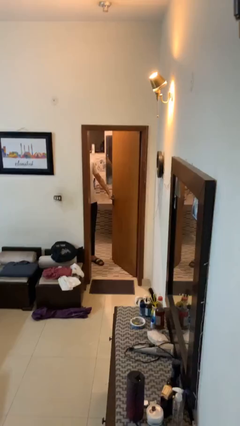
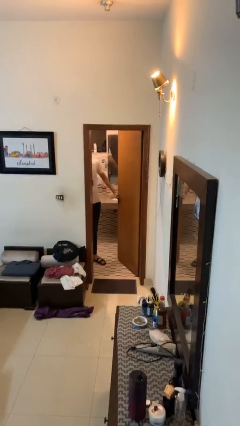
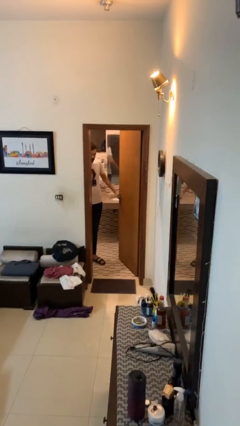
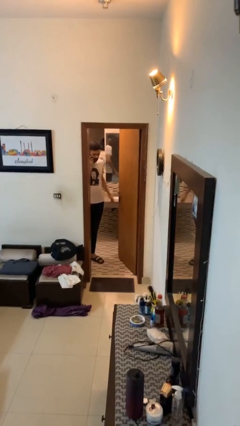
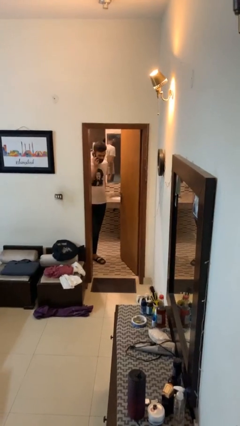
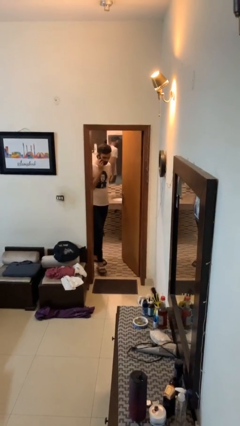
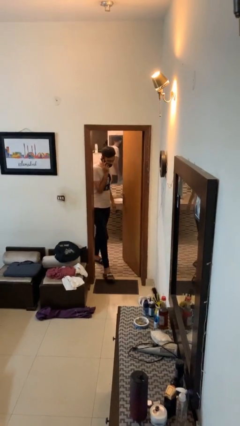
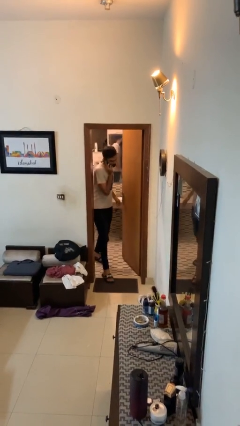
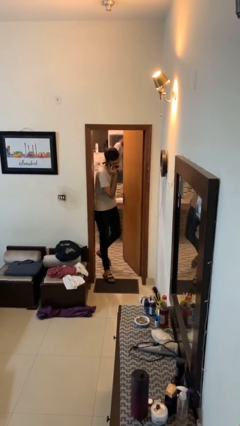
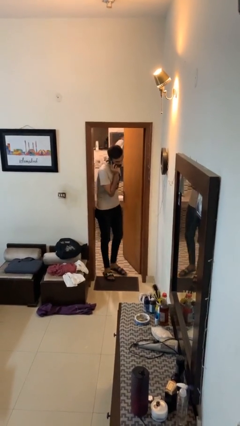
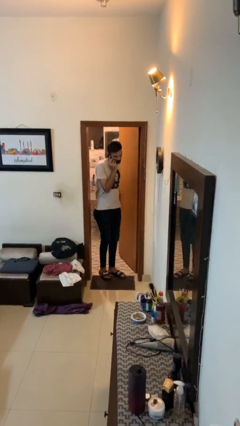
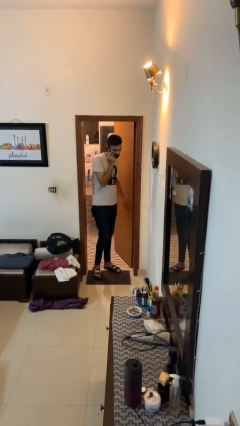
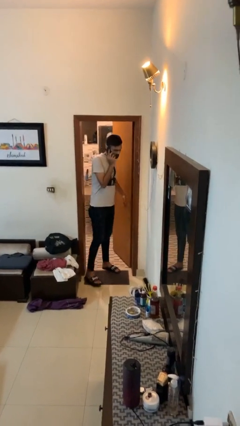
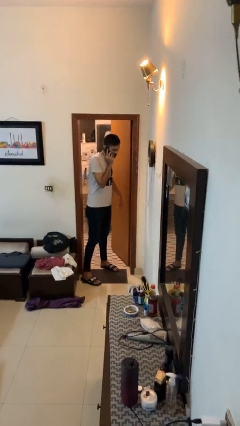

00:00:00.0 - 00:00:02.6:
person enters scene through structure

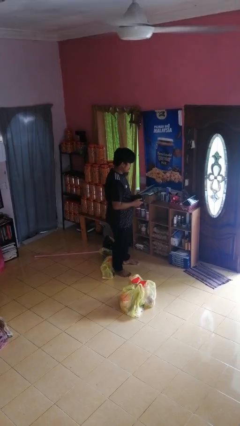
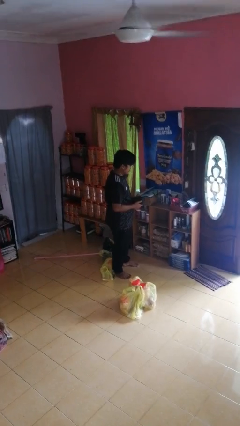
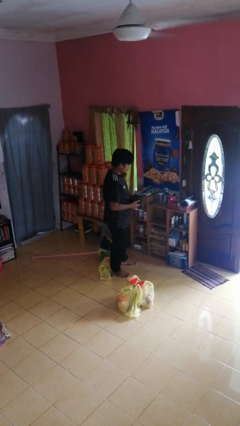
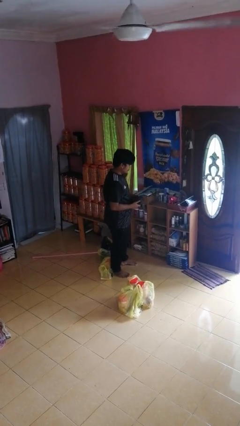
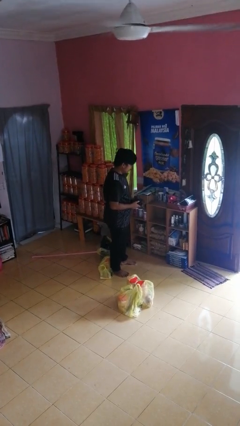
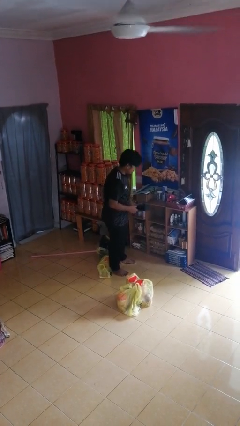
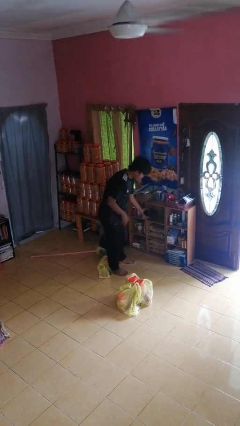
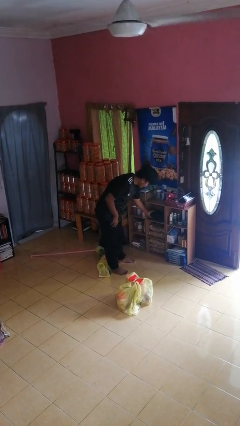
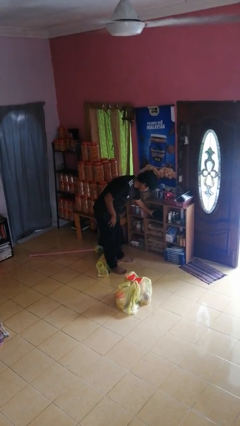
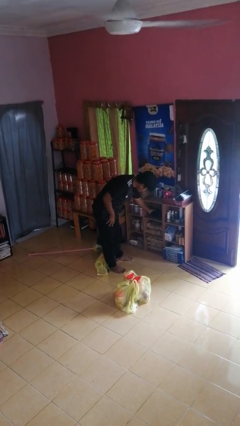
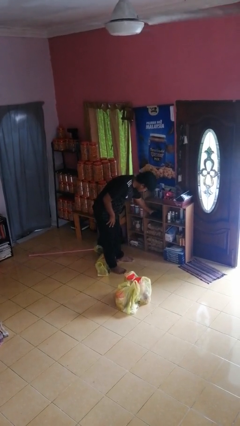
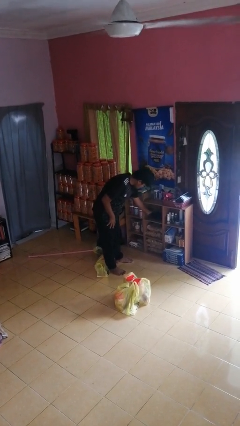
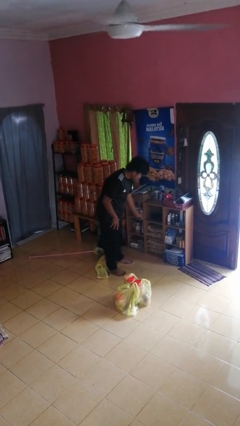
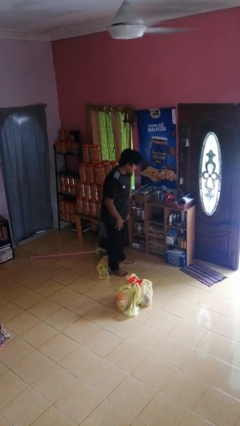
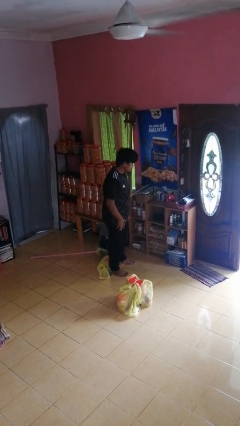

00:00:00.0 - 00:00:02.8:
person puts object in cabinet

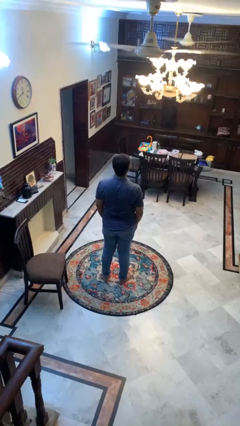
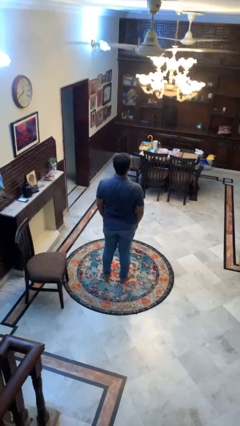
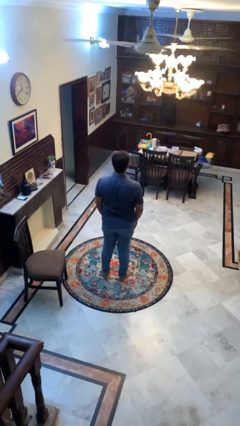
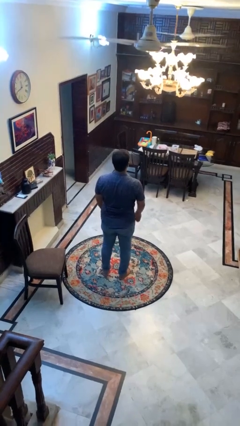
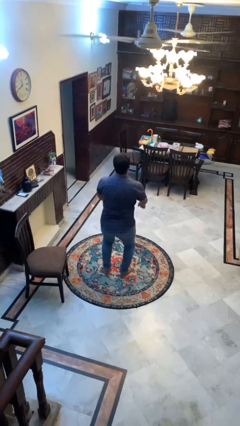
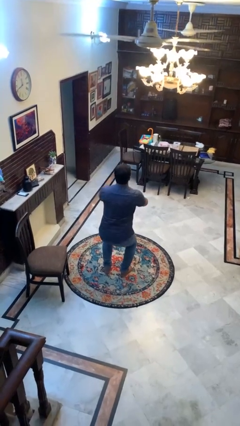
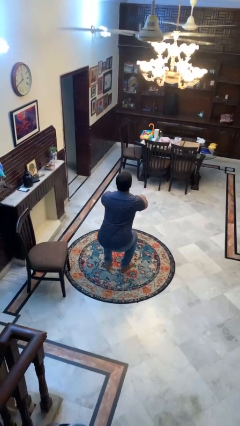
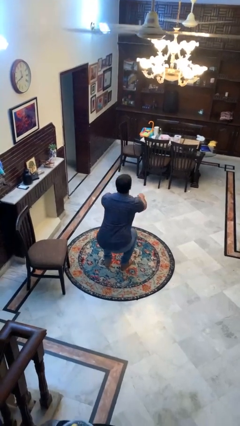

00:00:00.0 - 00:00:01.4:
person squats

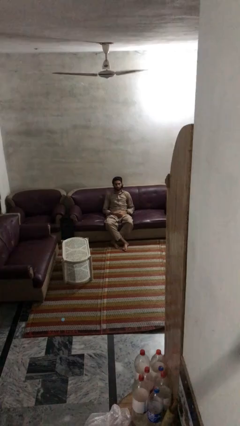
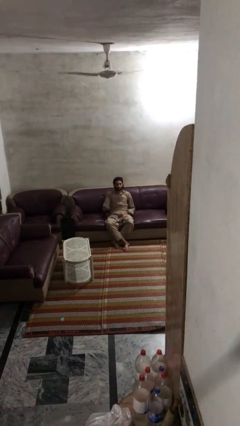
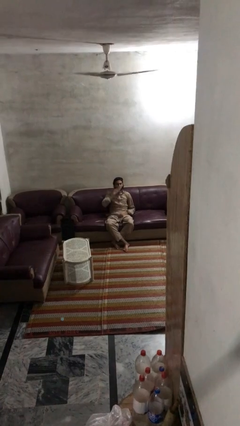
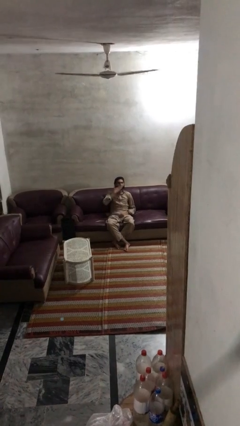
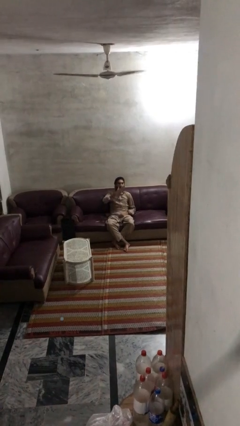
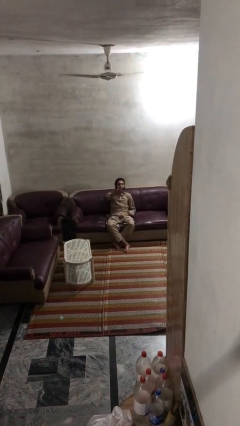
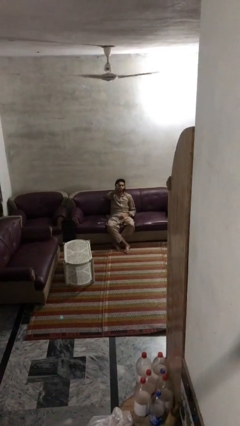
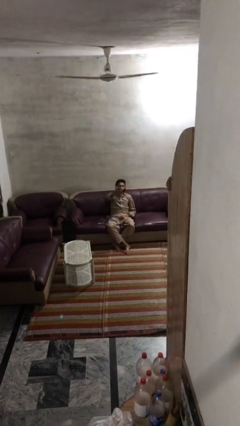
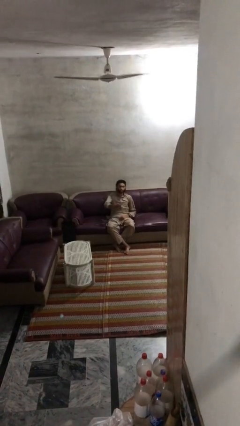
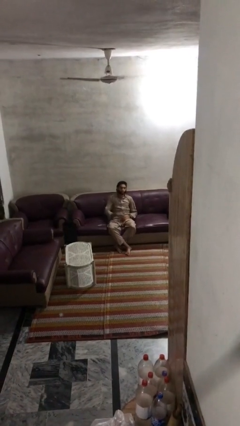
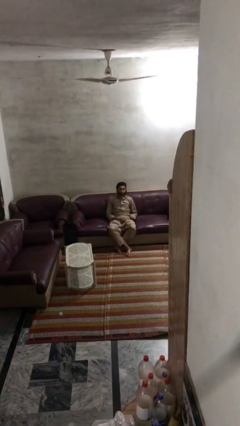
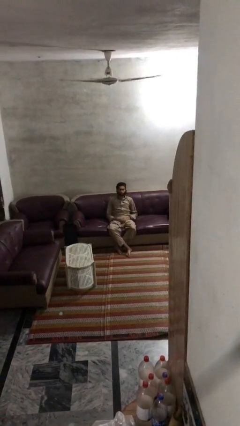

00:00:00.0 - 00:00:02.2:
person gestures blow kiss

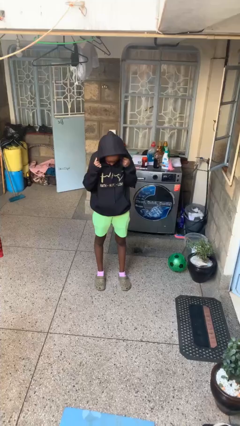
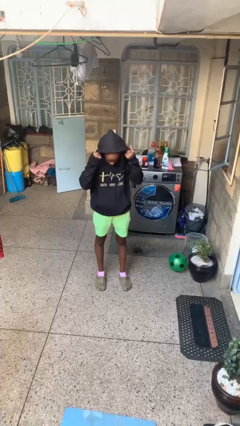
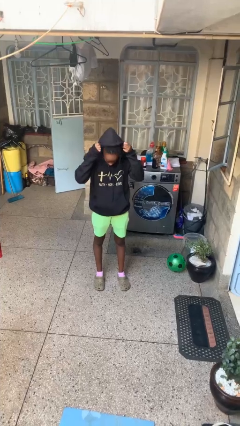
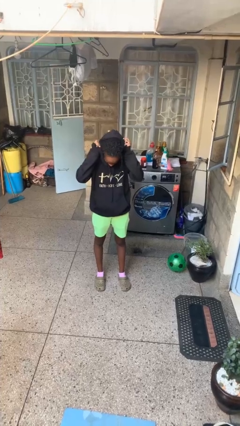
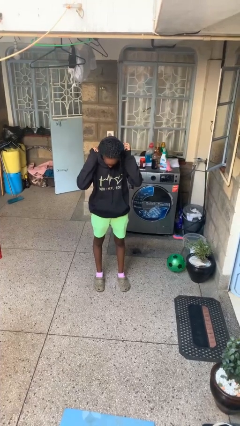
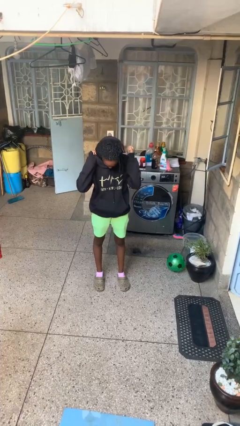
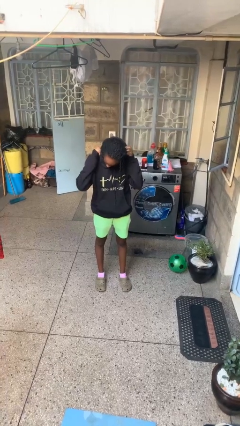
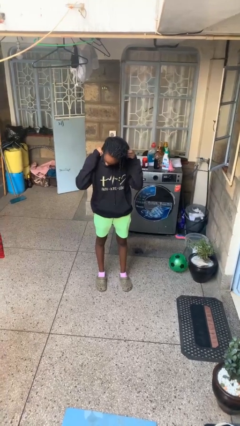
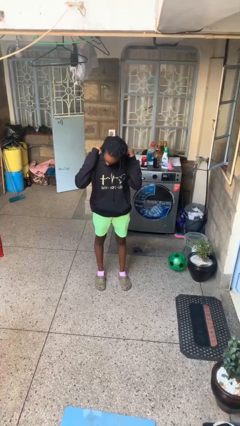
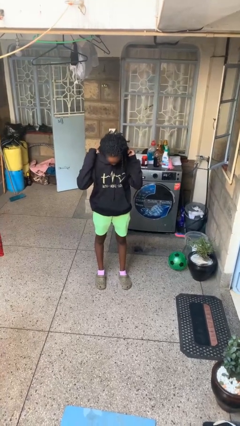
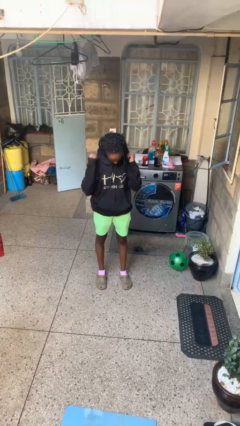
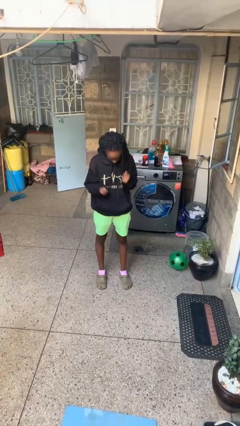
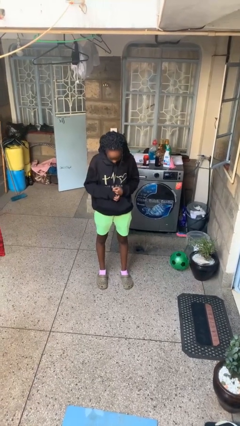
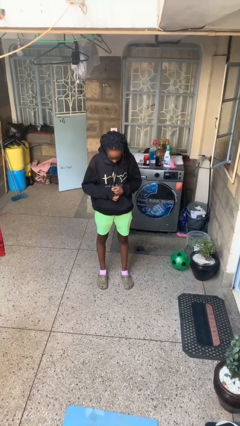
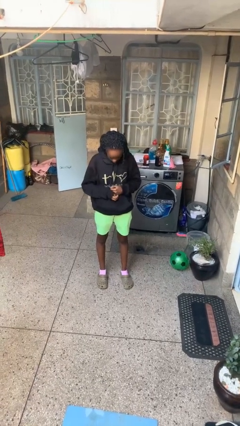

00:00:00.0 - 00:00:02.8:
person takes off hoodie

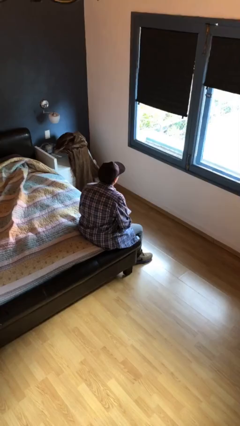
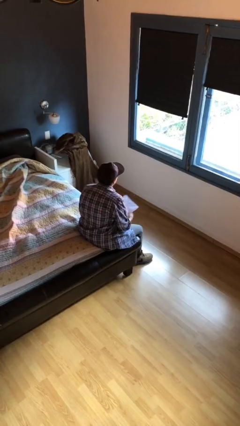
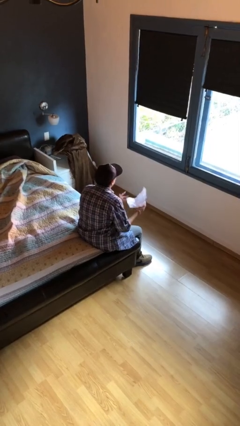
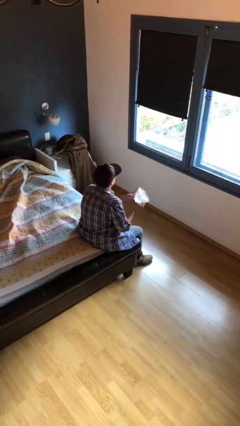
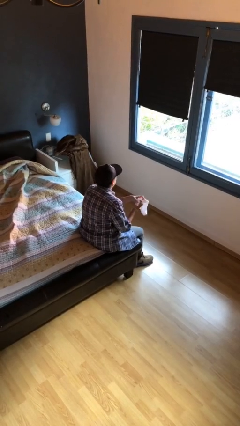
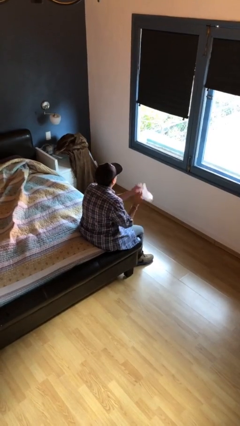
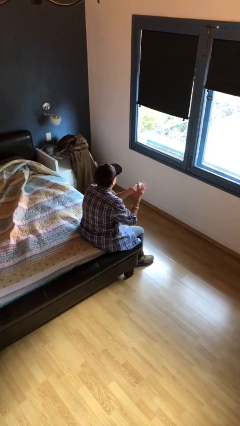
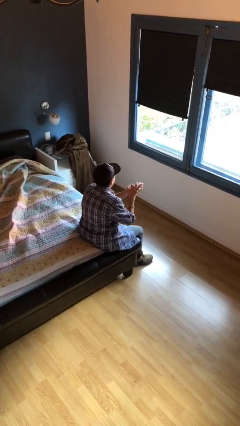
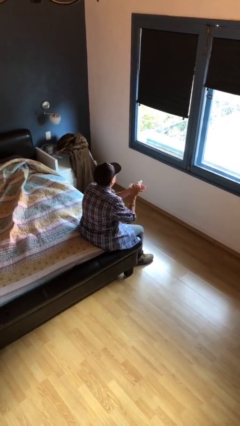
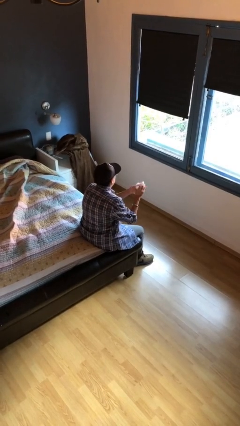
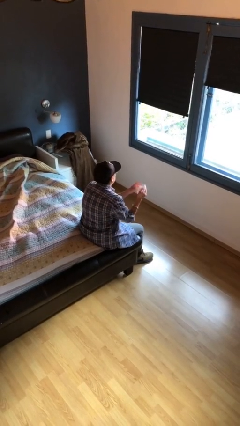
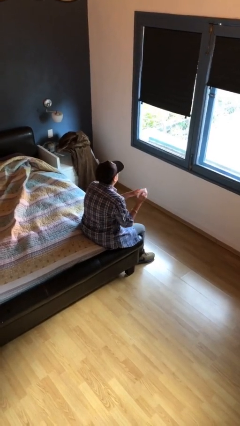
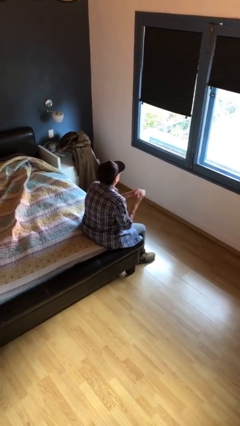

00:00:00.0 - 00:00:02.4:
person crumples paper

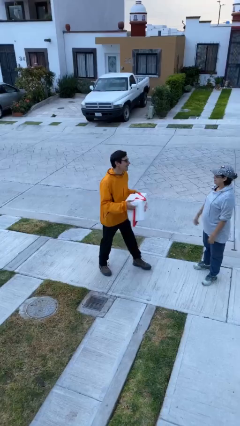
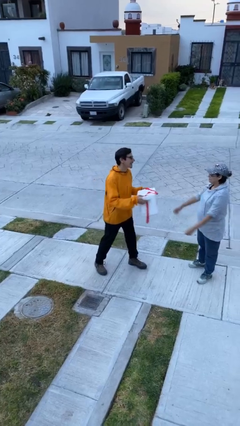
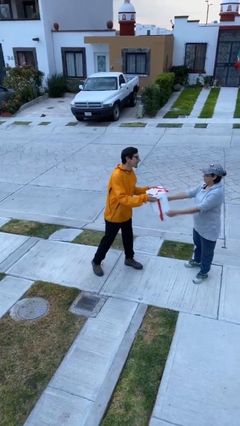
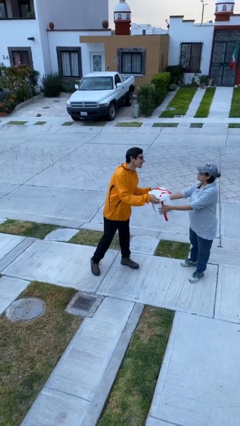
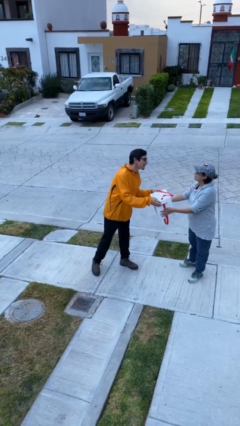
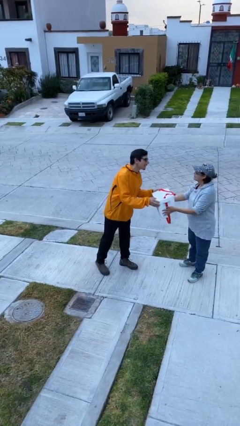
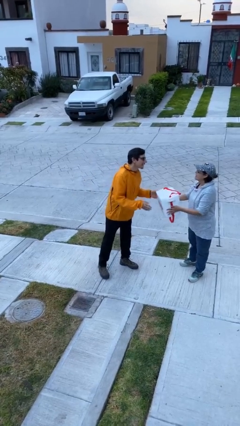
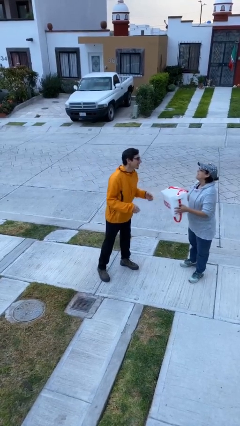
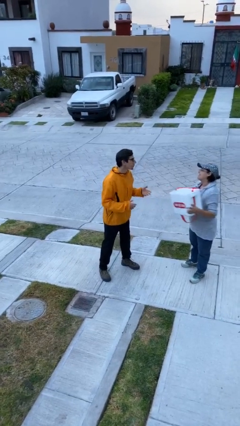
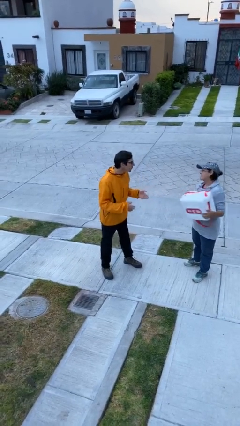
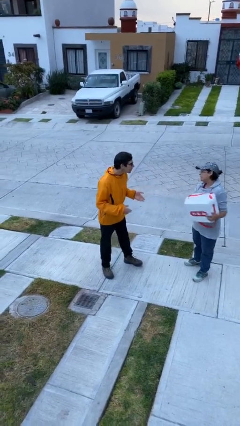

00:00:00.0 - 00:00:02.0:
person transfers object to person

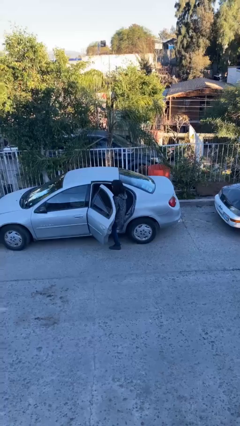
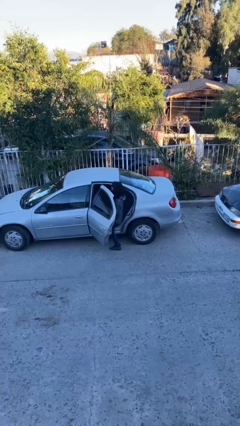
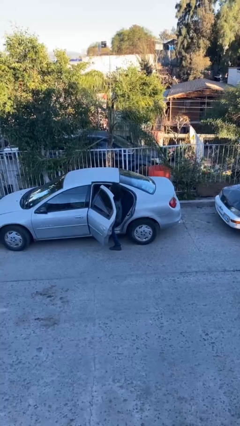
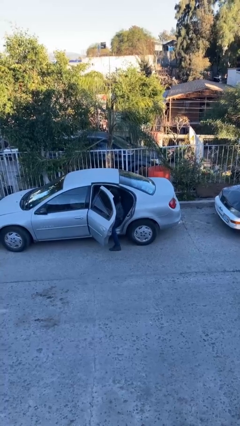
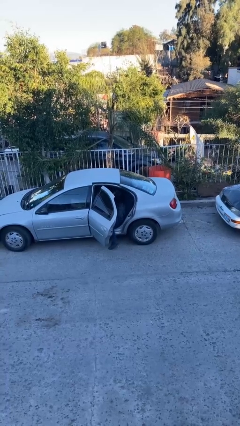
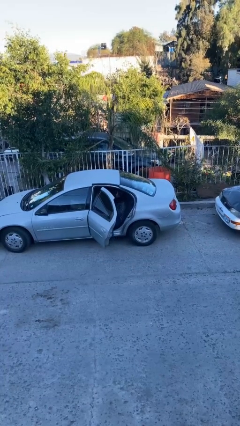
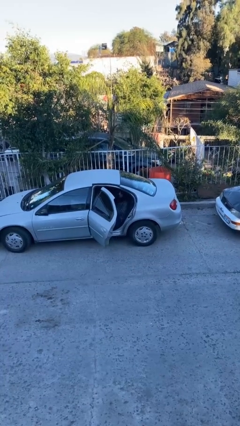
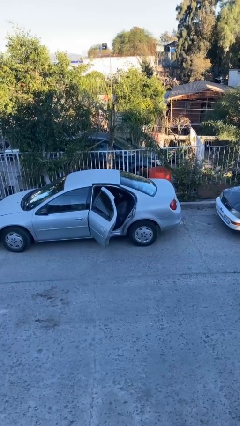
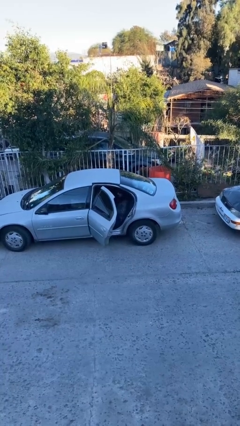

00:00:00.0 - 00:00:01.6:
person enters car
